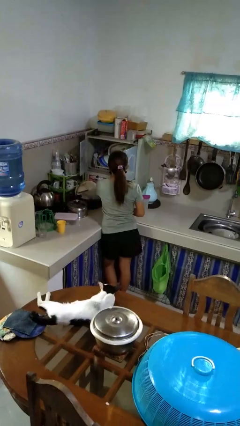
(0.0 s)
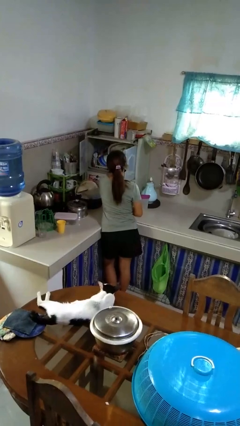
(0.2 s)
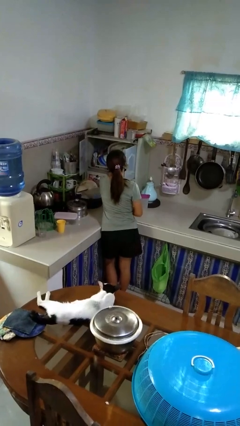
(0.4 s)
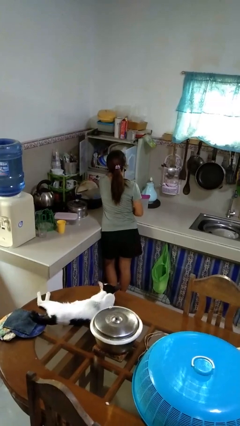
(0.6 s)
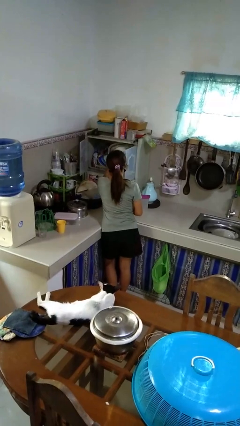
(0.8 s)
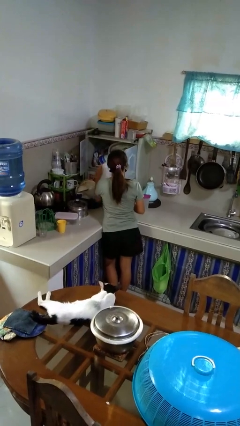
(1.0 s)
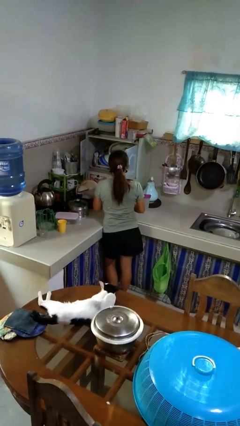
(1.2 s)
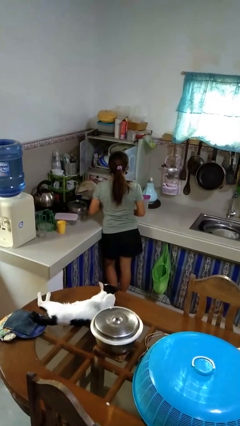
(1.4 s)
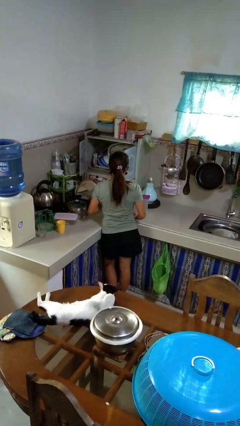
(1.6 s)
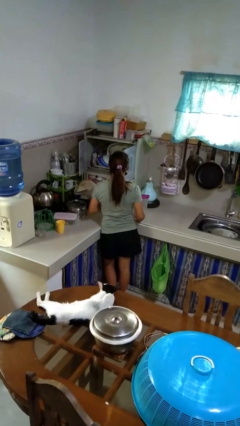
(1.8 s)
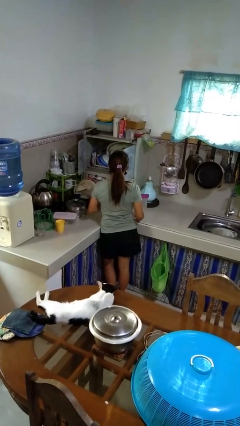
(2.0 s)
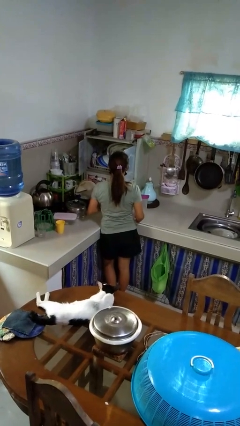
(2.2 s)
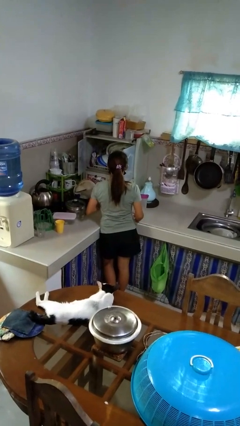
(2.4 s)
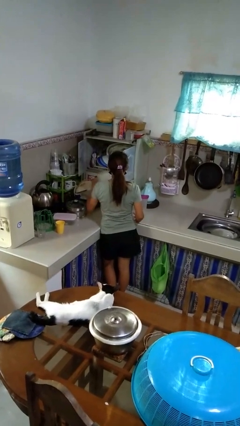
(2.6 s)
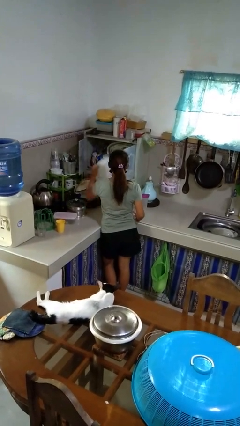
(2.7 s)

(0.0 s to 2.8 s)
person takes object from kitchen drawer

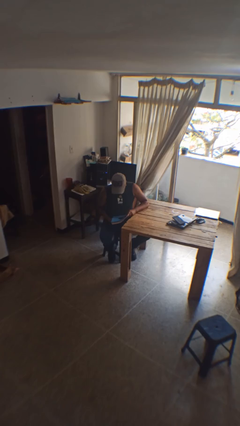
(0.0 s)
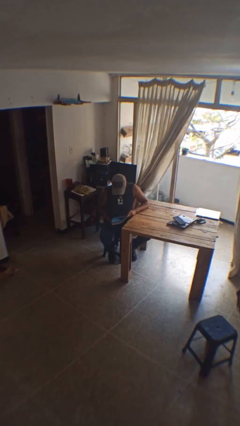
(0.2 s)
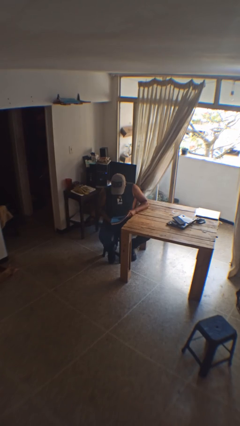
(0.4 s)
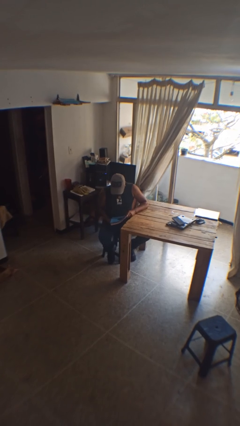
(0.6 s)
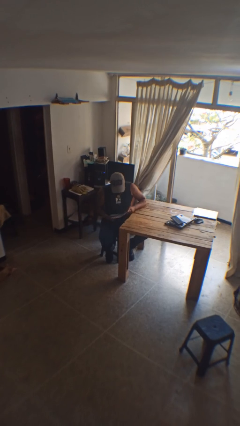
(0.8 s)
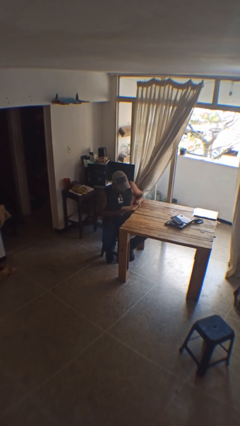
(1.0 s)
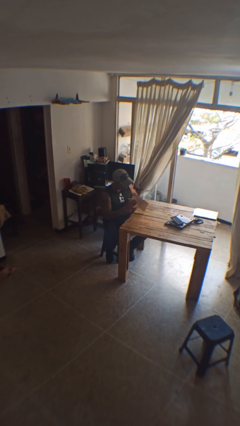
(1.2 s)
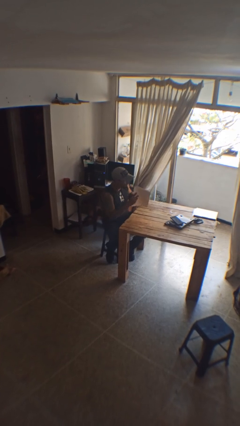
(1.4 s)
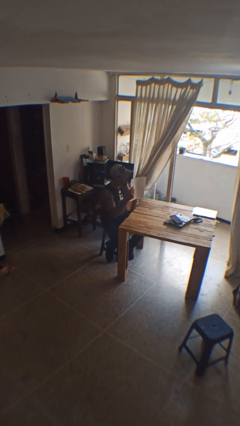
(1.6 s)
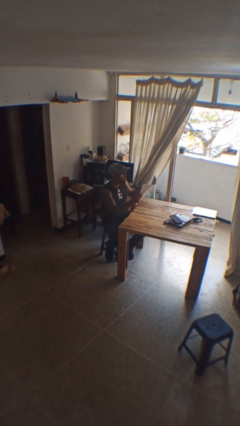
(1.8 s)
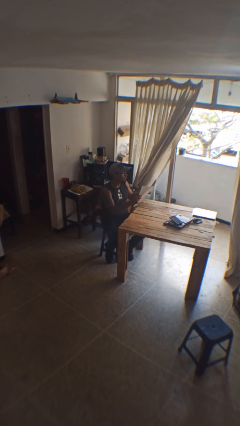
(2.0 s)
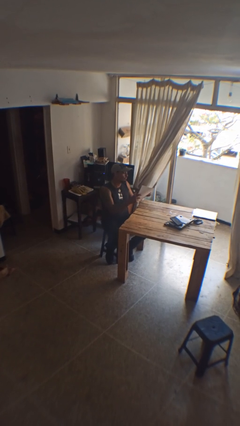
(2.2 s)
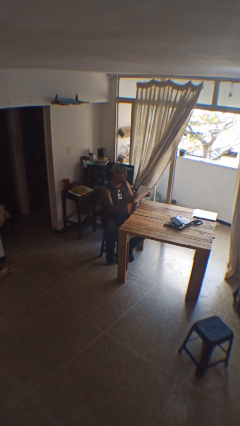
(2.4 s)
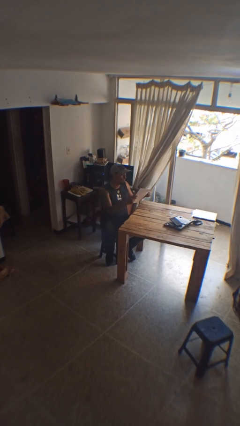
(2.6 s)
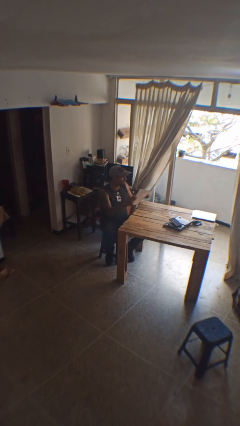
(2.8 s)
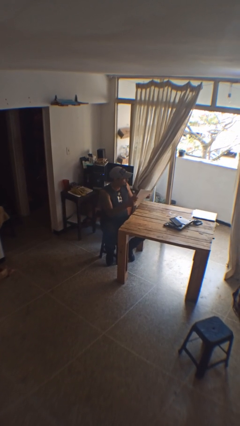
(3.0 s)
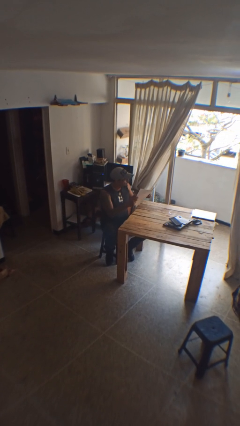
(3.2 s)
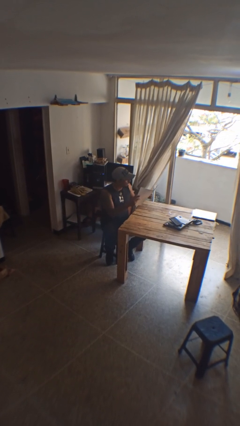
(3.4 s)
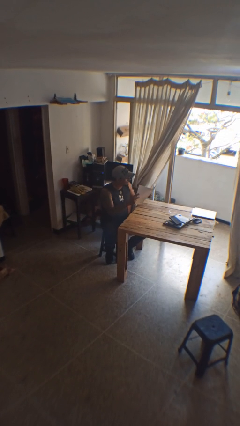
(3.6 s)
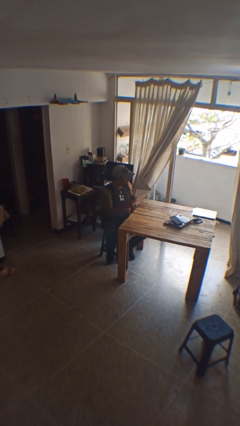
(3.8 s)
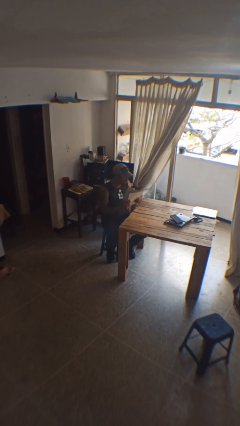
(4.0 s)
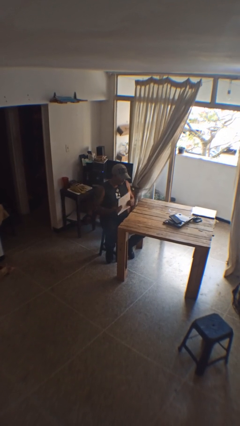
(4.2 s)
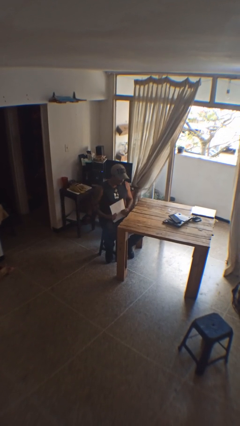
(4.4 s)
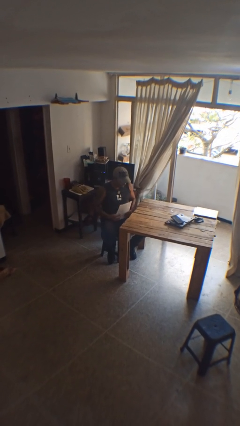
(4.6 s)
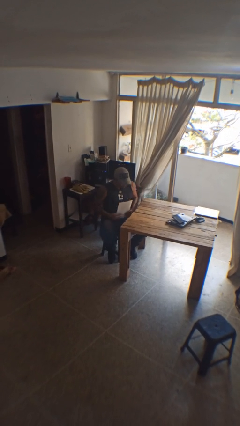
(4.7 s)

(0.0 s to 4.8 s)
person reads document

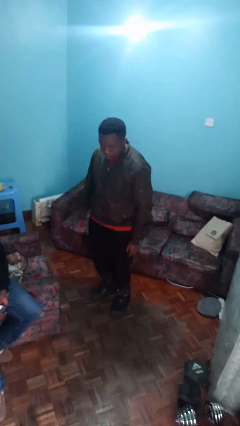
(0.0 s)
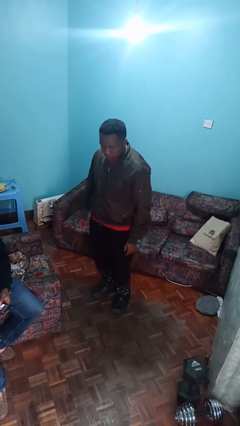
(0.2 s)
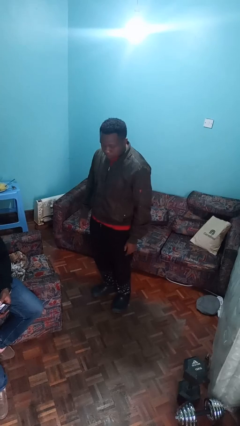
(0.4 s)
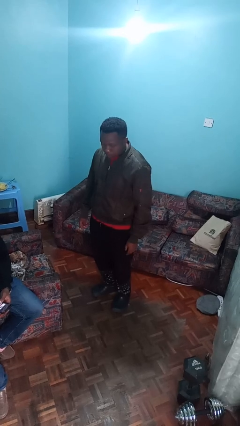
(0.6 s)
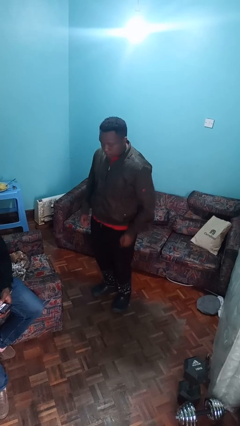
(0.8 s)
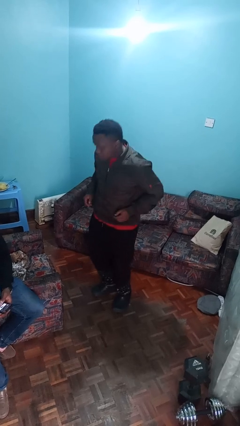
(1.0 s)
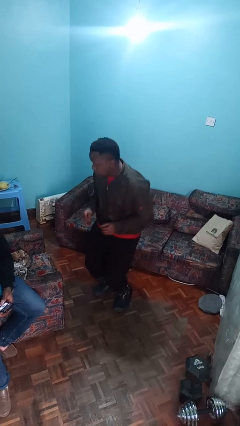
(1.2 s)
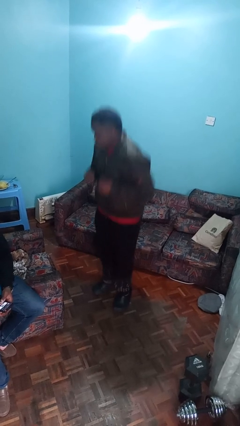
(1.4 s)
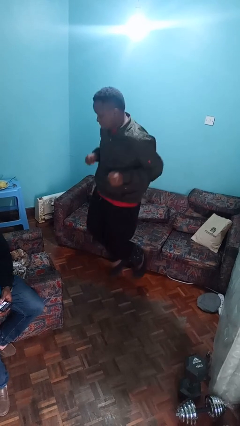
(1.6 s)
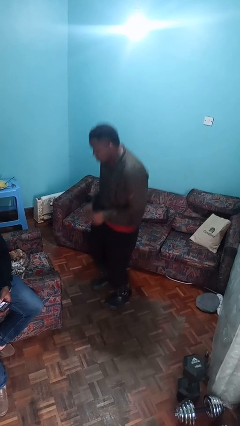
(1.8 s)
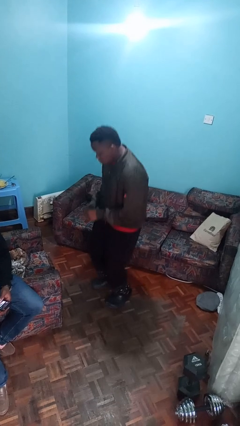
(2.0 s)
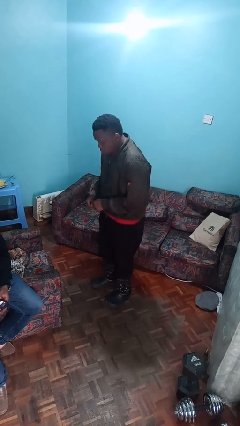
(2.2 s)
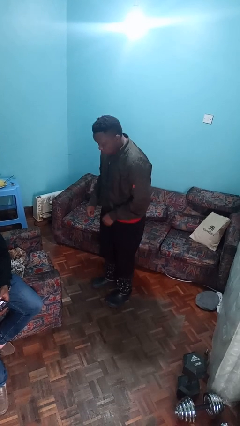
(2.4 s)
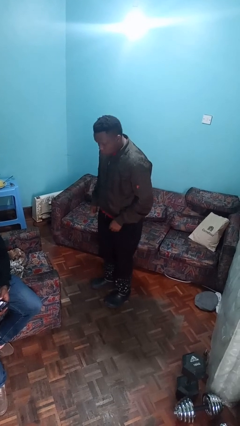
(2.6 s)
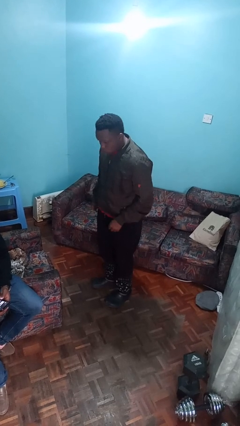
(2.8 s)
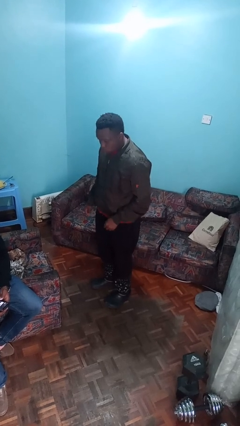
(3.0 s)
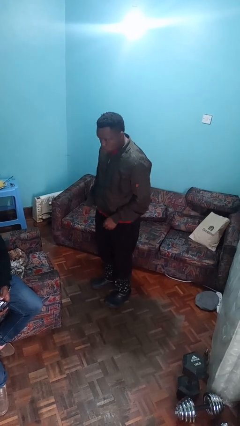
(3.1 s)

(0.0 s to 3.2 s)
person jumps

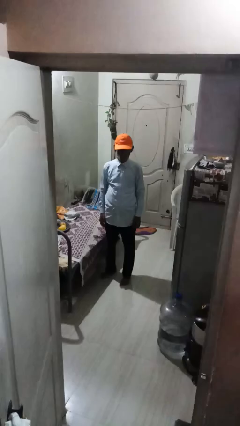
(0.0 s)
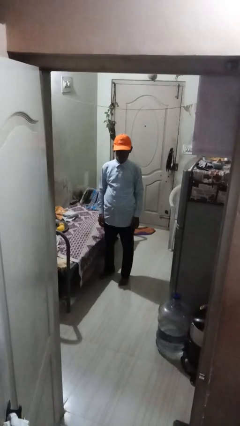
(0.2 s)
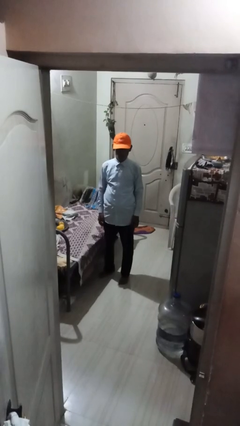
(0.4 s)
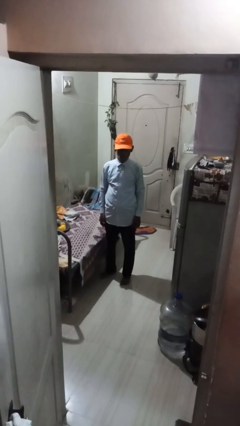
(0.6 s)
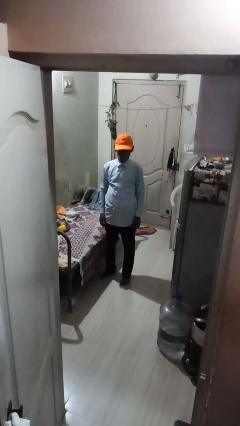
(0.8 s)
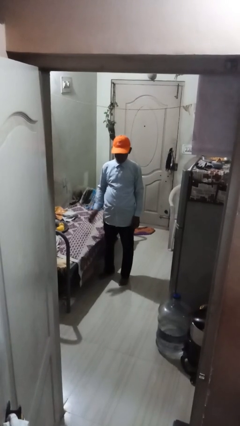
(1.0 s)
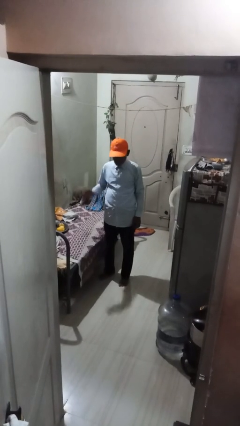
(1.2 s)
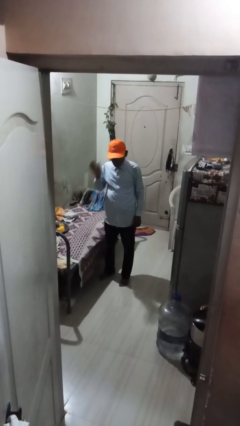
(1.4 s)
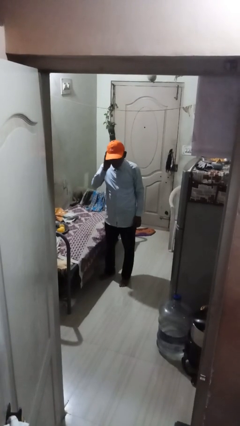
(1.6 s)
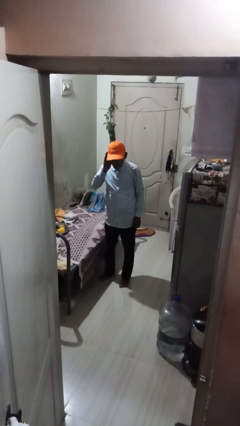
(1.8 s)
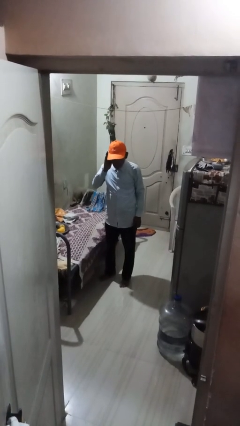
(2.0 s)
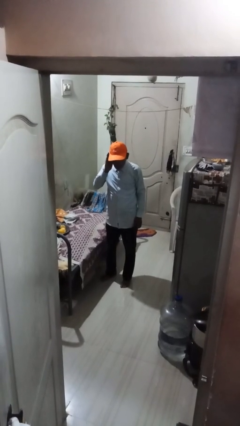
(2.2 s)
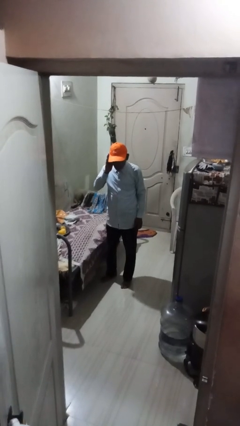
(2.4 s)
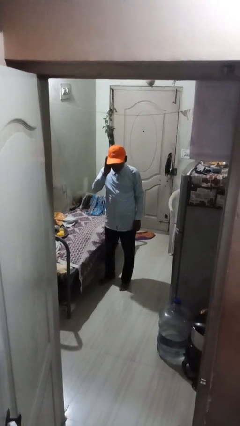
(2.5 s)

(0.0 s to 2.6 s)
person gestures listen closely

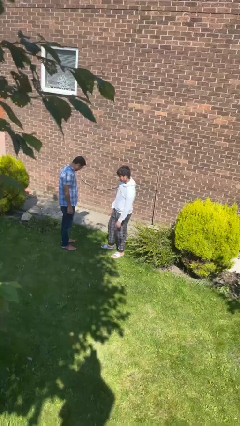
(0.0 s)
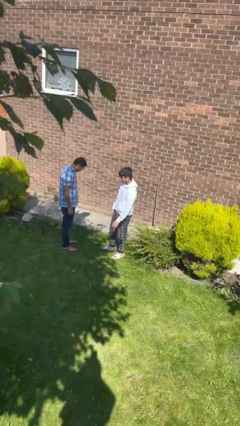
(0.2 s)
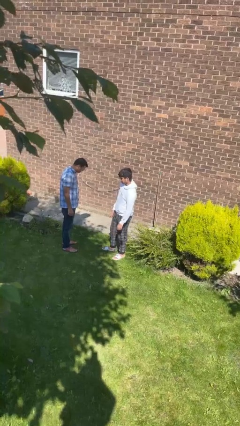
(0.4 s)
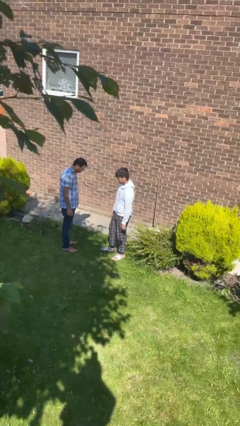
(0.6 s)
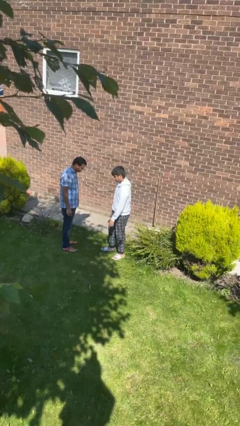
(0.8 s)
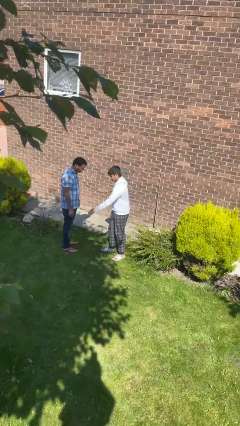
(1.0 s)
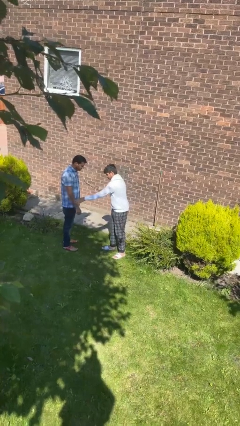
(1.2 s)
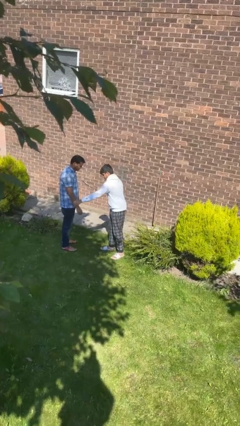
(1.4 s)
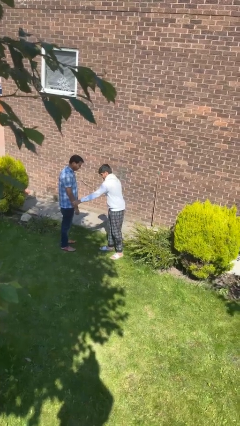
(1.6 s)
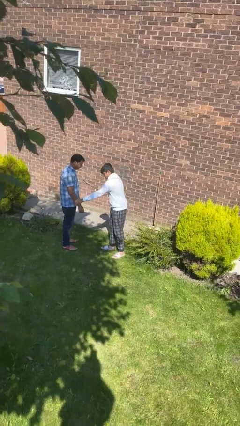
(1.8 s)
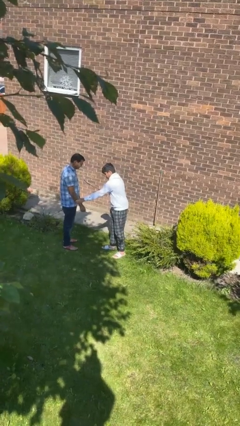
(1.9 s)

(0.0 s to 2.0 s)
person grabs person by forearm

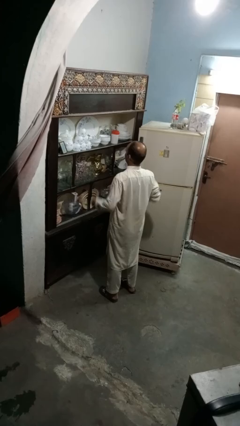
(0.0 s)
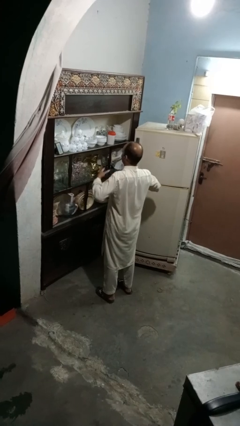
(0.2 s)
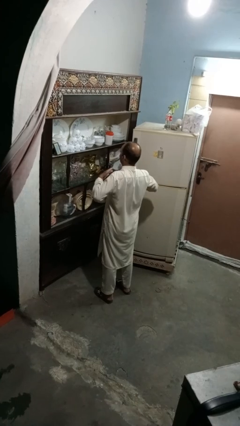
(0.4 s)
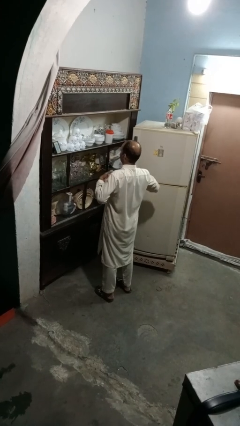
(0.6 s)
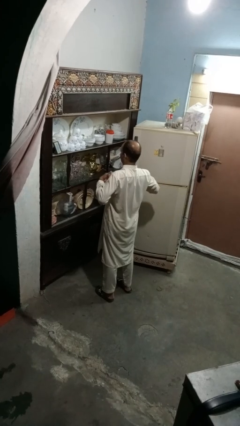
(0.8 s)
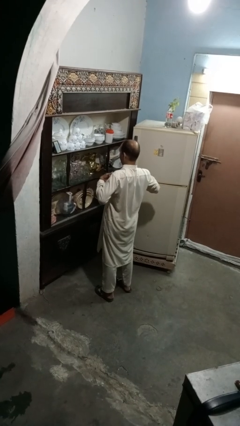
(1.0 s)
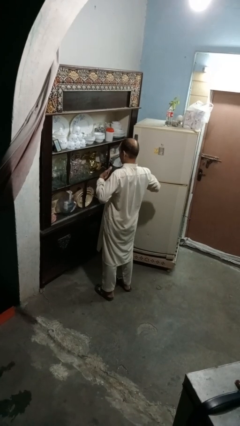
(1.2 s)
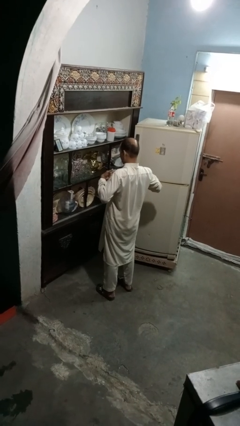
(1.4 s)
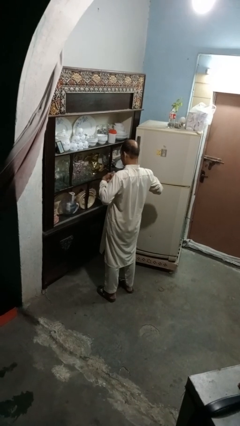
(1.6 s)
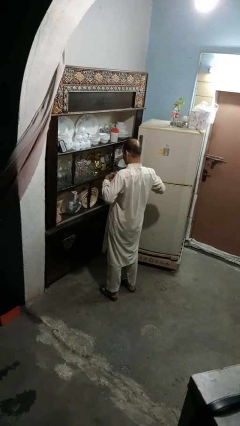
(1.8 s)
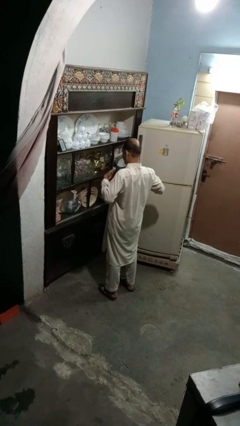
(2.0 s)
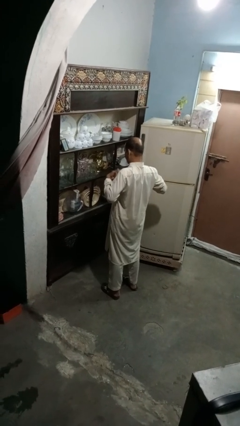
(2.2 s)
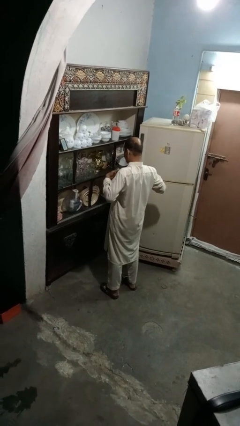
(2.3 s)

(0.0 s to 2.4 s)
person drums on chest
